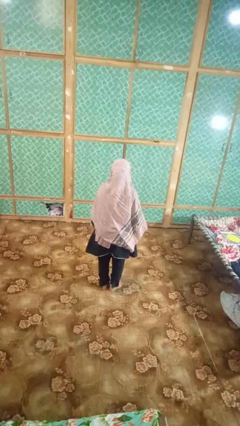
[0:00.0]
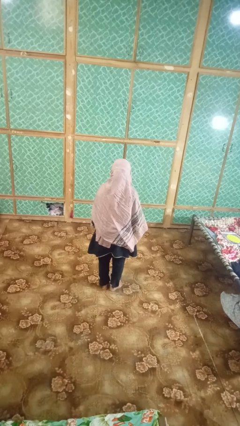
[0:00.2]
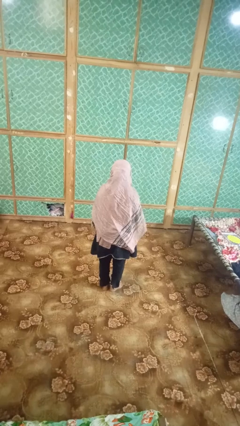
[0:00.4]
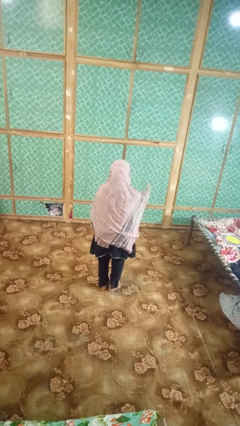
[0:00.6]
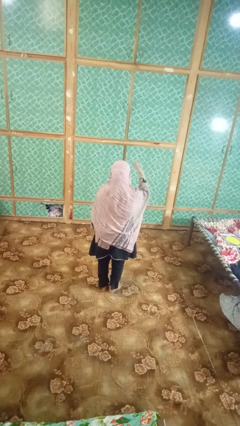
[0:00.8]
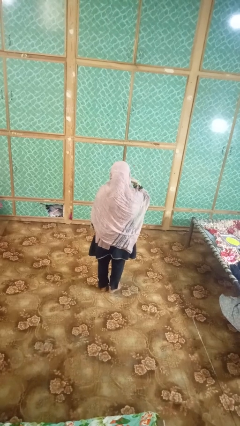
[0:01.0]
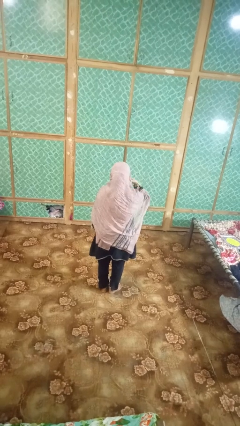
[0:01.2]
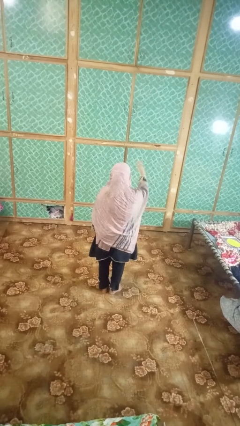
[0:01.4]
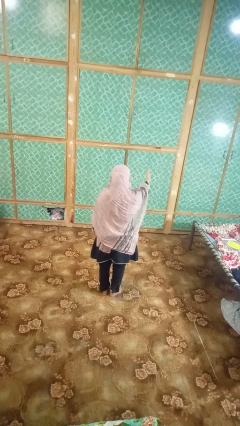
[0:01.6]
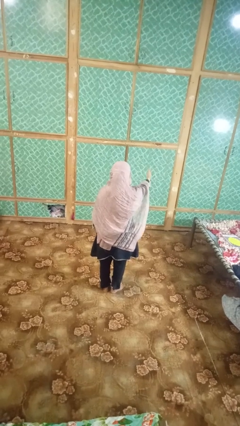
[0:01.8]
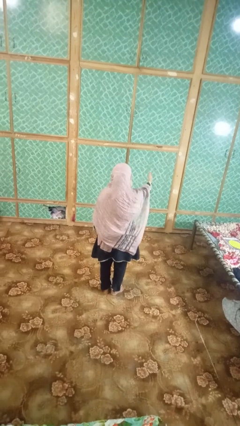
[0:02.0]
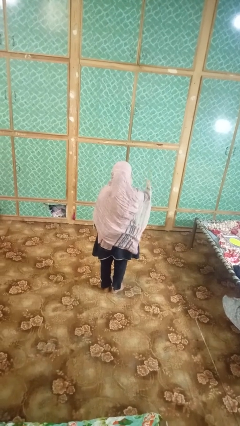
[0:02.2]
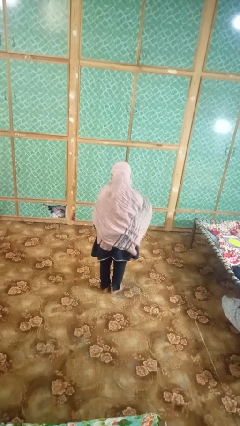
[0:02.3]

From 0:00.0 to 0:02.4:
person gestures blow kiss

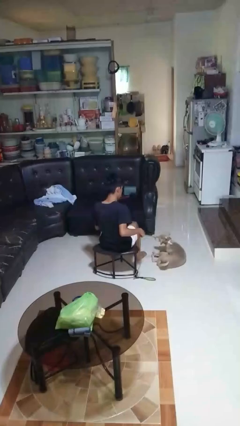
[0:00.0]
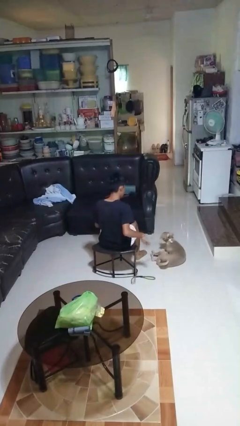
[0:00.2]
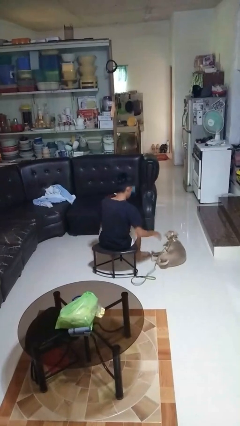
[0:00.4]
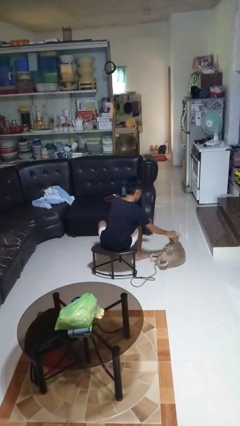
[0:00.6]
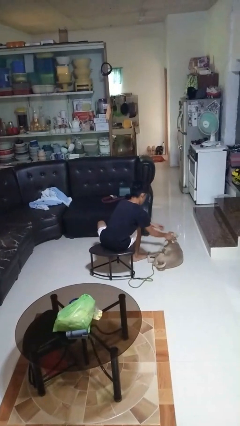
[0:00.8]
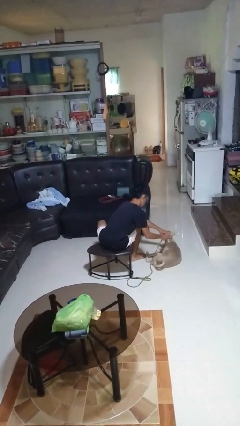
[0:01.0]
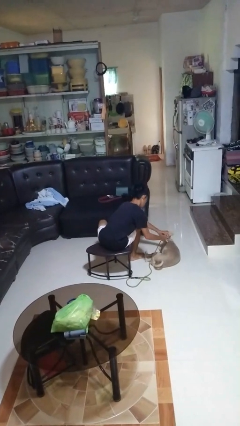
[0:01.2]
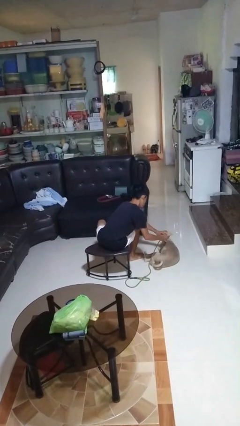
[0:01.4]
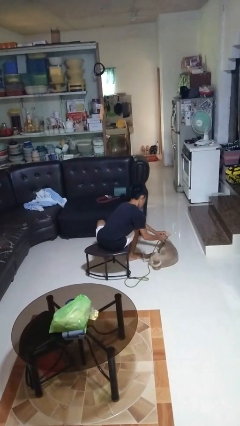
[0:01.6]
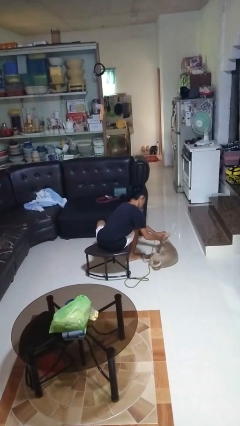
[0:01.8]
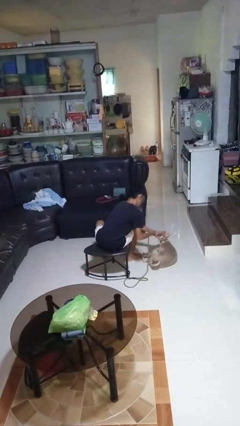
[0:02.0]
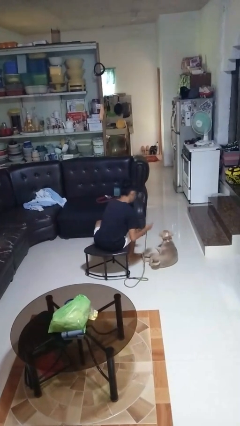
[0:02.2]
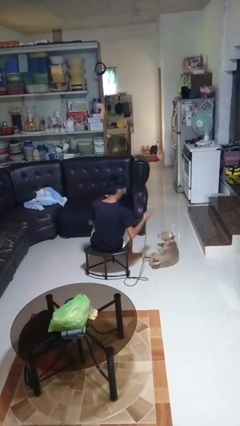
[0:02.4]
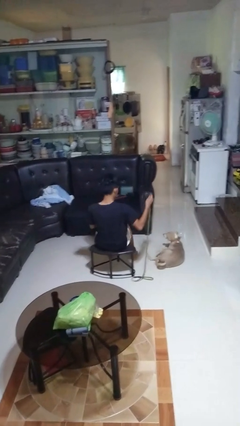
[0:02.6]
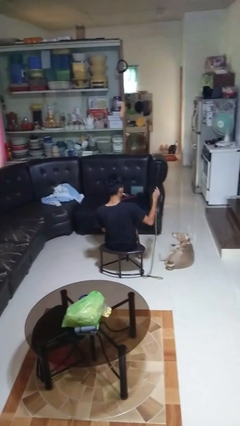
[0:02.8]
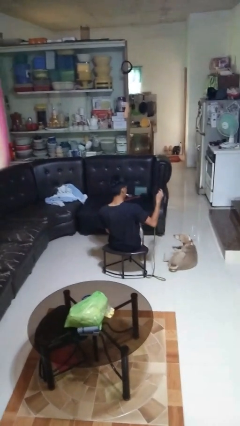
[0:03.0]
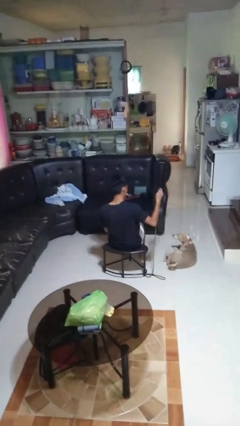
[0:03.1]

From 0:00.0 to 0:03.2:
person unattaches leash from dog

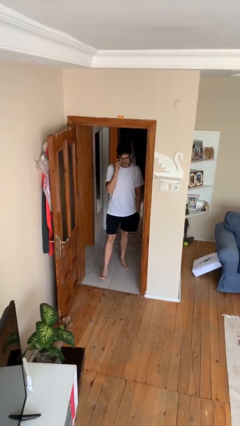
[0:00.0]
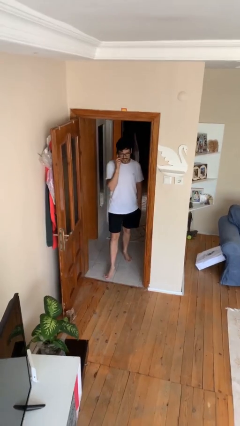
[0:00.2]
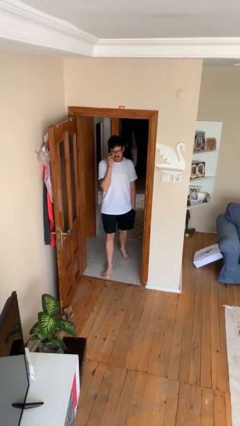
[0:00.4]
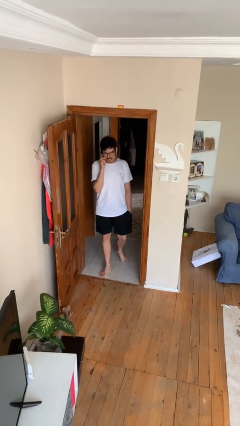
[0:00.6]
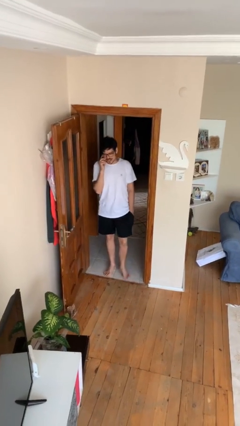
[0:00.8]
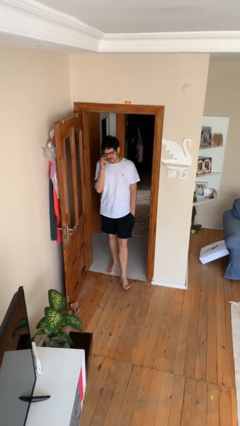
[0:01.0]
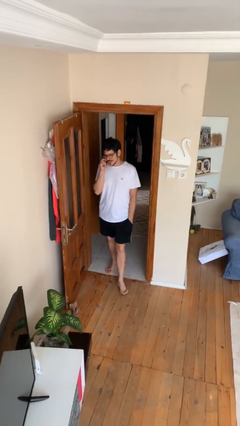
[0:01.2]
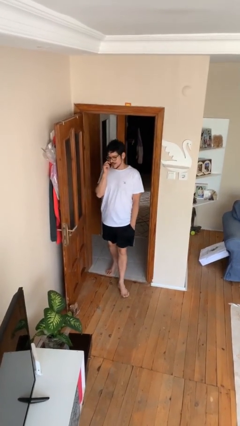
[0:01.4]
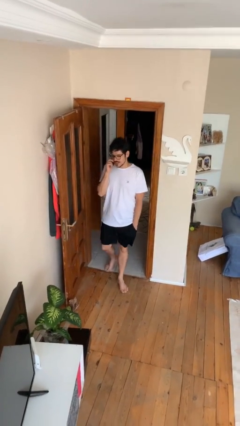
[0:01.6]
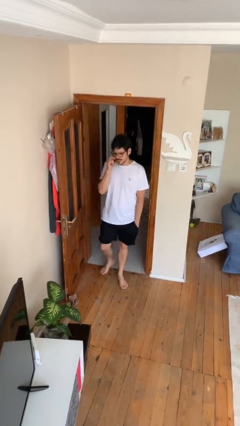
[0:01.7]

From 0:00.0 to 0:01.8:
person enters scene through structure

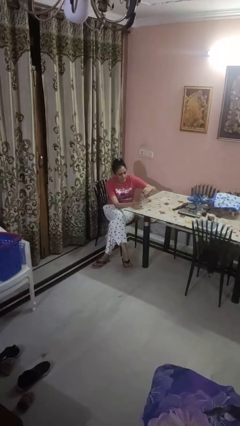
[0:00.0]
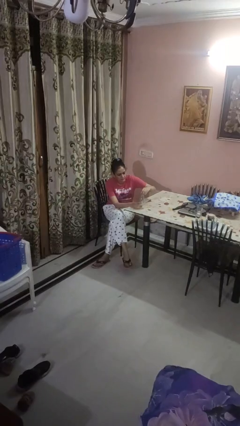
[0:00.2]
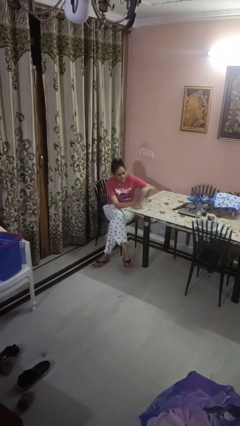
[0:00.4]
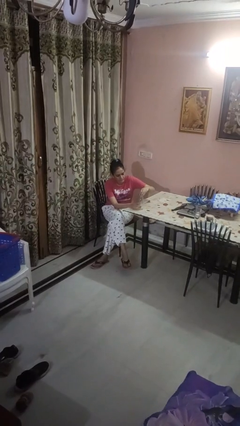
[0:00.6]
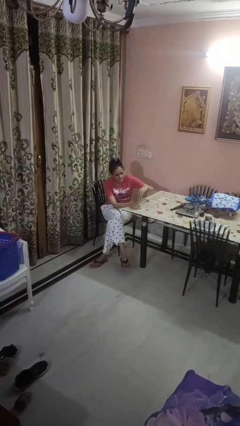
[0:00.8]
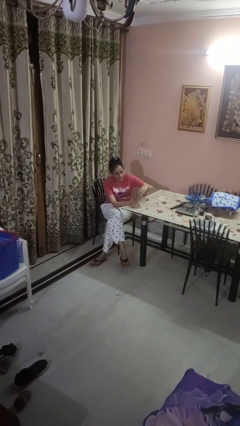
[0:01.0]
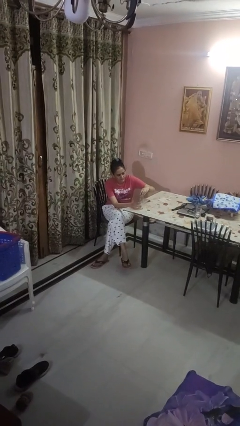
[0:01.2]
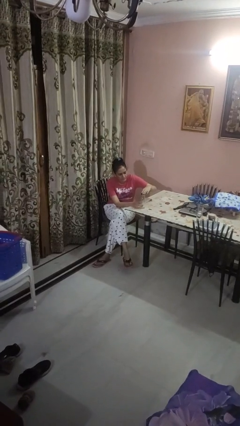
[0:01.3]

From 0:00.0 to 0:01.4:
person screws lid to bottle

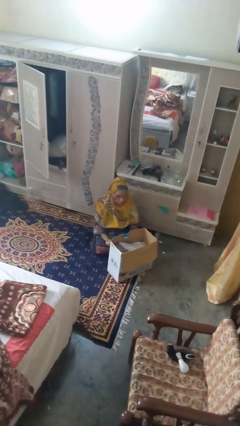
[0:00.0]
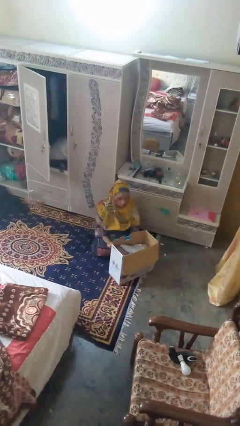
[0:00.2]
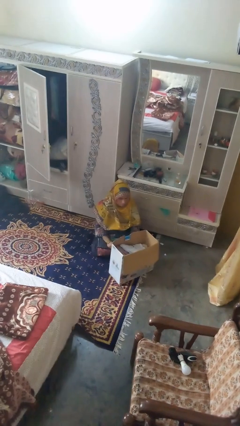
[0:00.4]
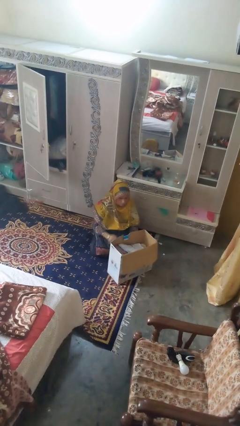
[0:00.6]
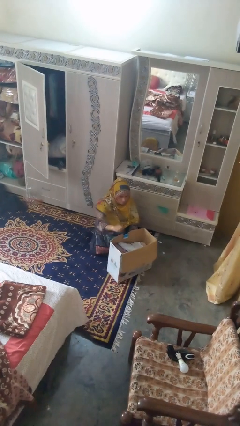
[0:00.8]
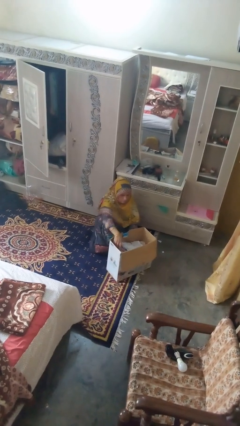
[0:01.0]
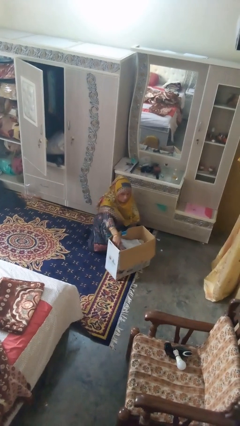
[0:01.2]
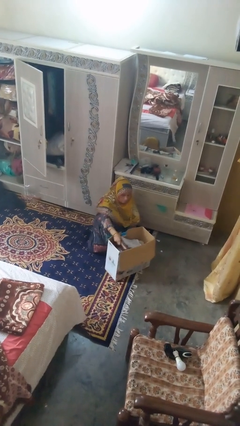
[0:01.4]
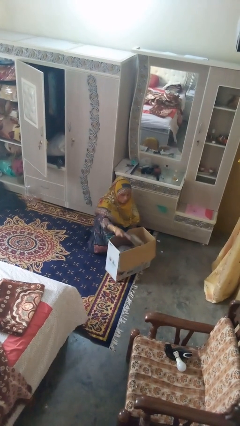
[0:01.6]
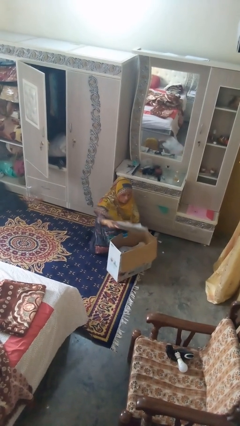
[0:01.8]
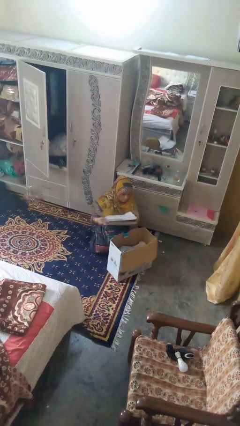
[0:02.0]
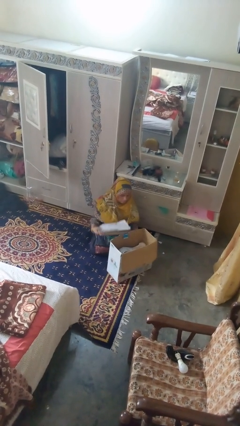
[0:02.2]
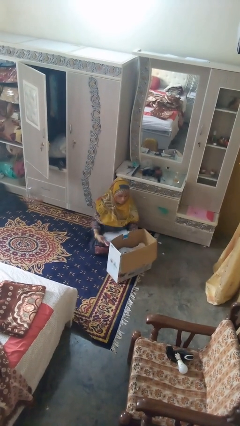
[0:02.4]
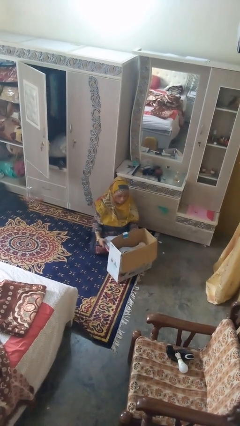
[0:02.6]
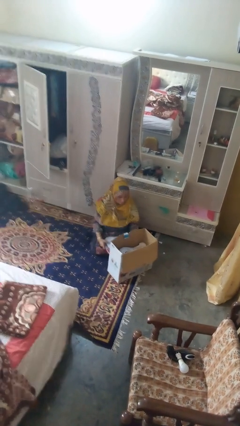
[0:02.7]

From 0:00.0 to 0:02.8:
person takes object from box

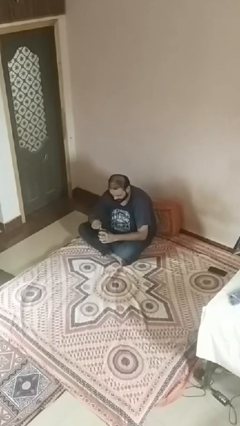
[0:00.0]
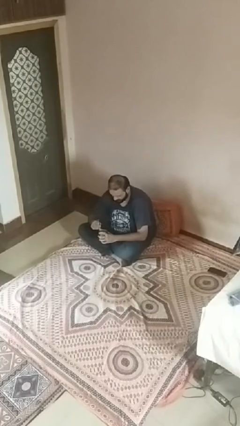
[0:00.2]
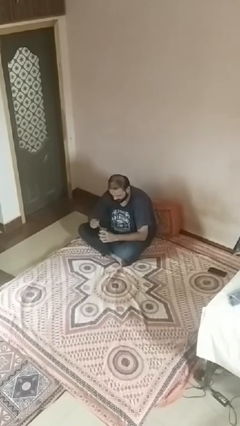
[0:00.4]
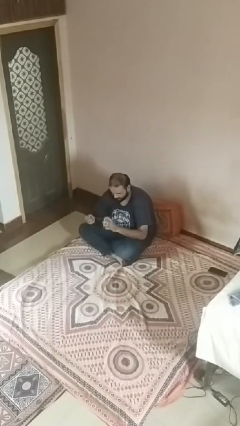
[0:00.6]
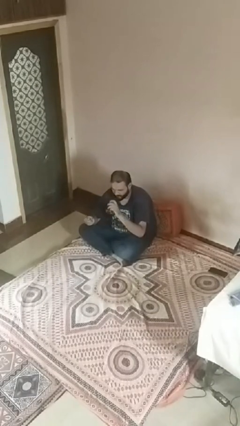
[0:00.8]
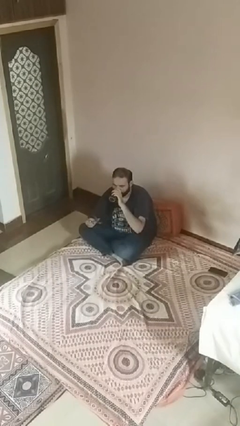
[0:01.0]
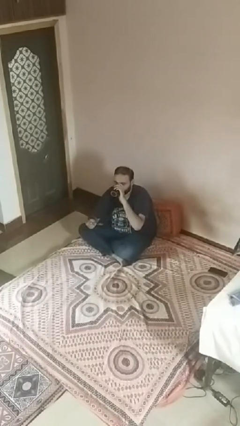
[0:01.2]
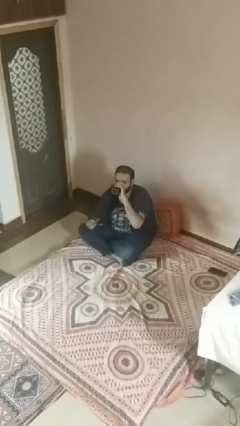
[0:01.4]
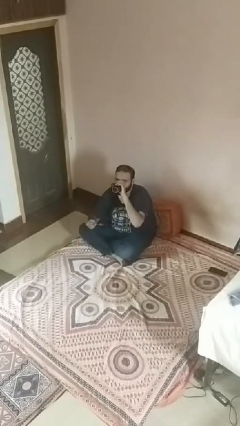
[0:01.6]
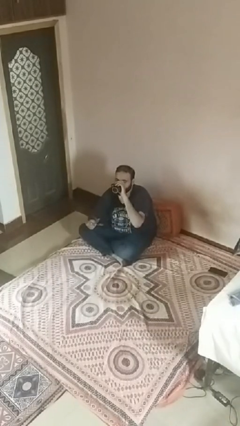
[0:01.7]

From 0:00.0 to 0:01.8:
person drinks from mug

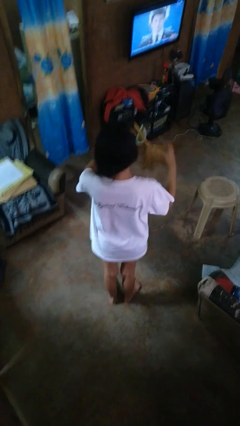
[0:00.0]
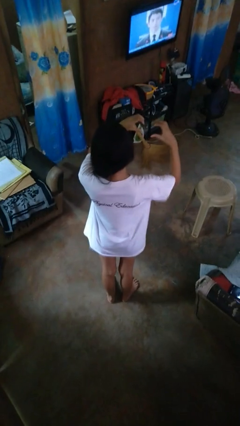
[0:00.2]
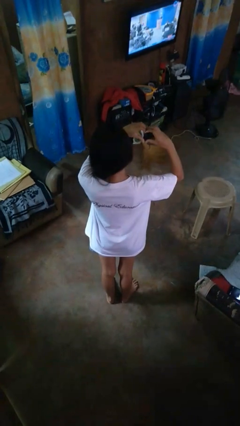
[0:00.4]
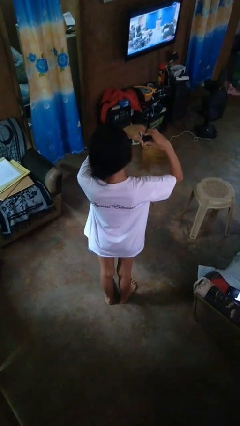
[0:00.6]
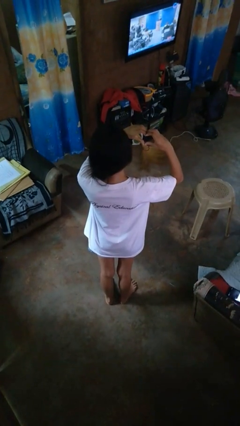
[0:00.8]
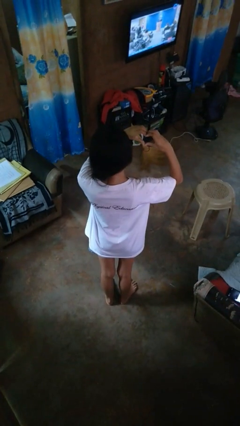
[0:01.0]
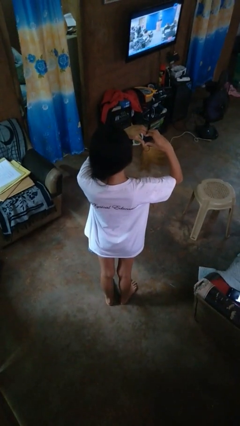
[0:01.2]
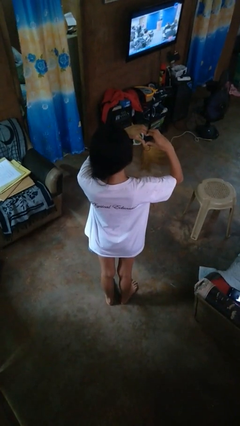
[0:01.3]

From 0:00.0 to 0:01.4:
person gestures heart

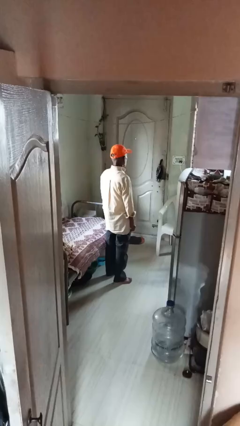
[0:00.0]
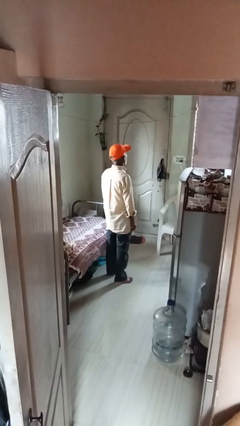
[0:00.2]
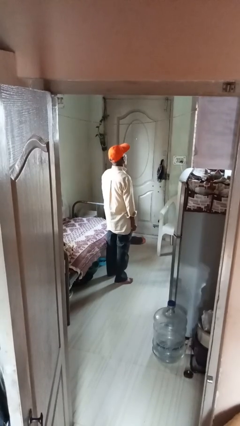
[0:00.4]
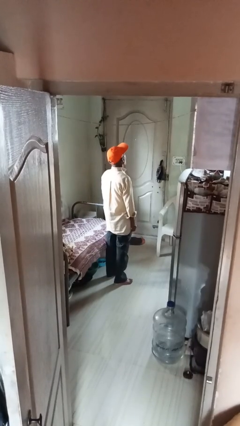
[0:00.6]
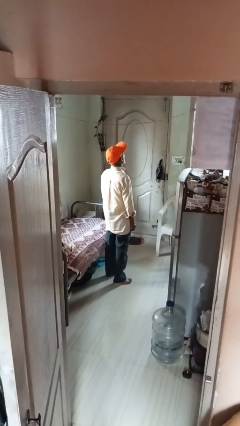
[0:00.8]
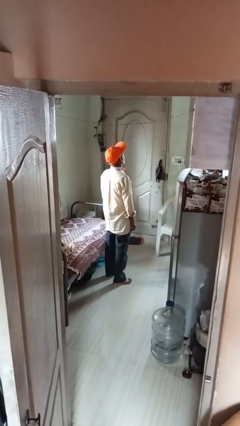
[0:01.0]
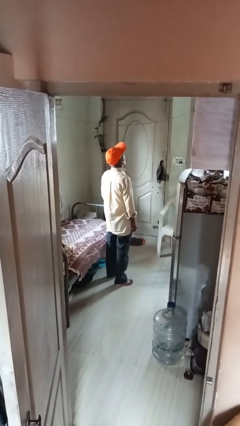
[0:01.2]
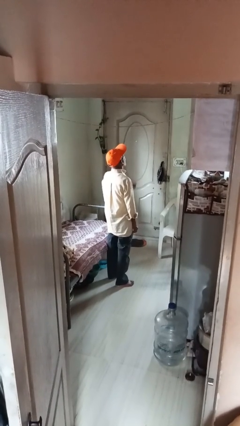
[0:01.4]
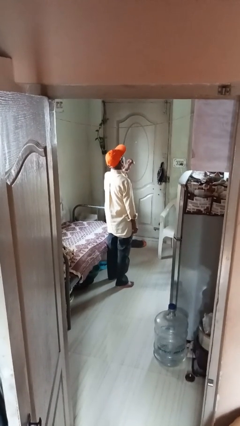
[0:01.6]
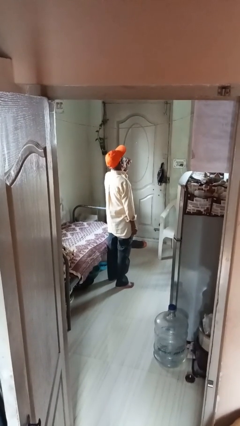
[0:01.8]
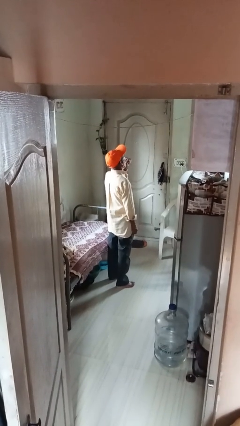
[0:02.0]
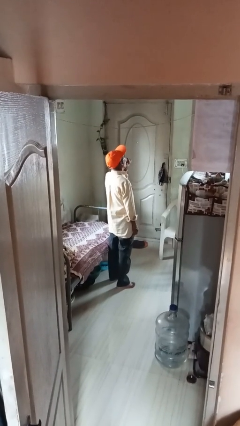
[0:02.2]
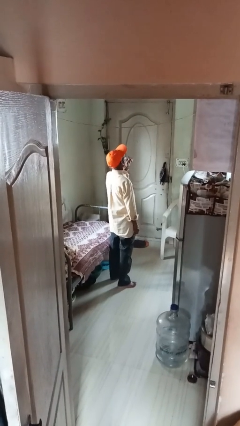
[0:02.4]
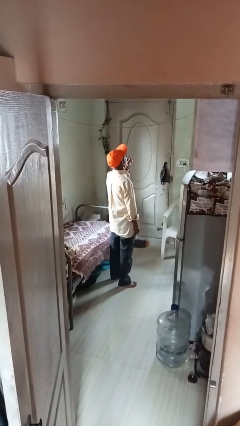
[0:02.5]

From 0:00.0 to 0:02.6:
person yawns
